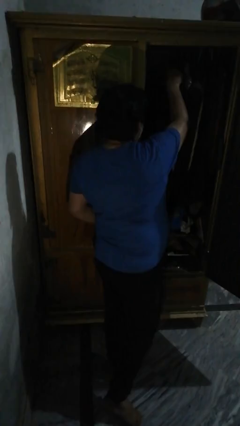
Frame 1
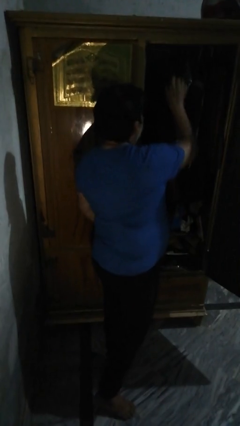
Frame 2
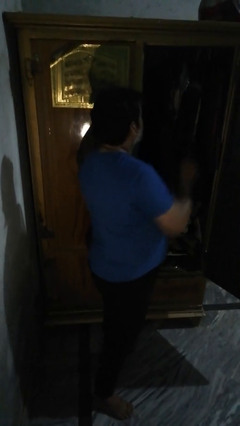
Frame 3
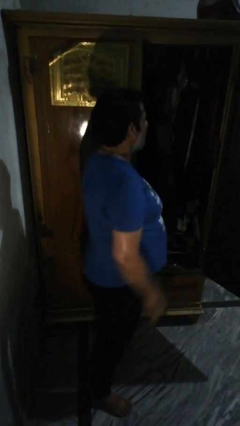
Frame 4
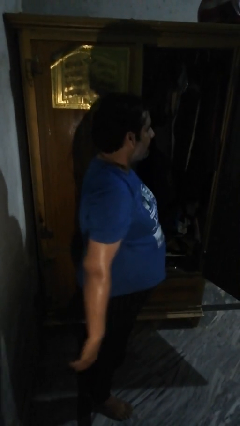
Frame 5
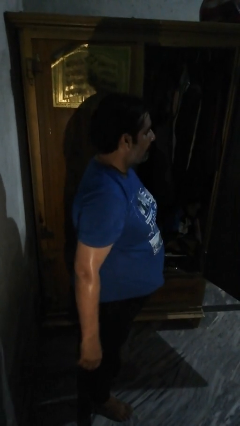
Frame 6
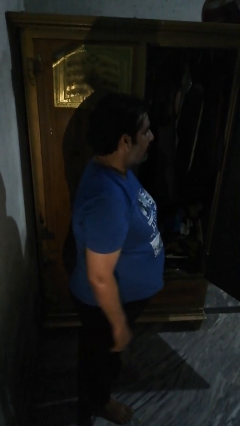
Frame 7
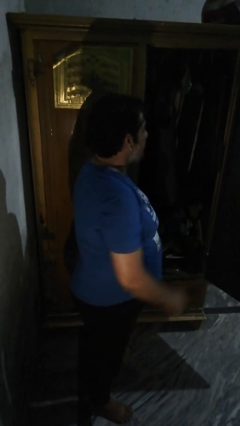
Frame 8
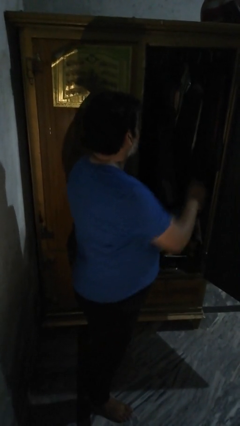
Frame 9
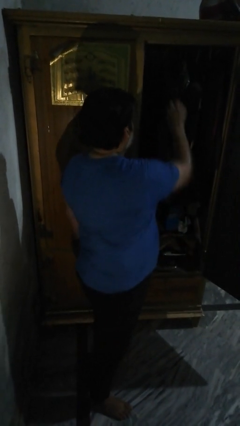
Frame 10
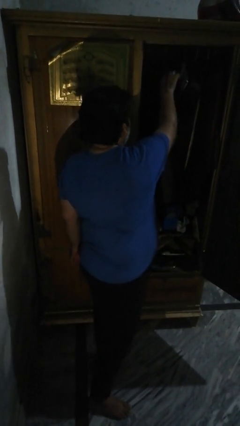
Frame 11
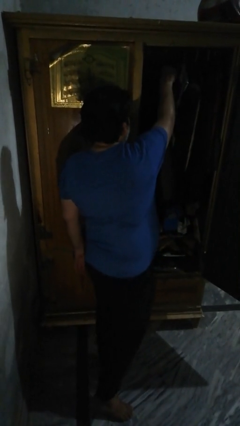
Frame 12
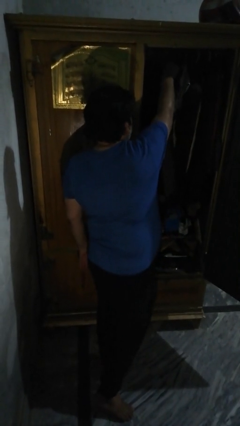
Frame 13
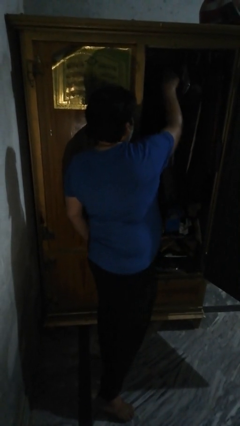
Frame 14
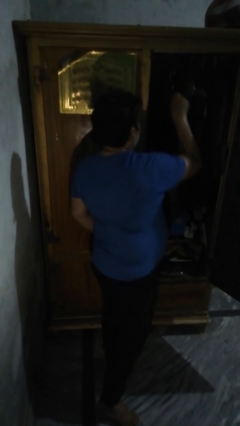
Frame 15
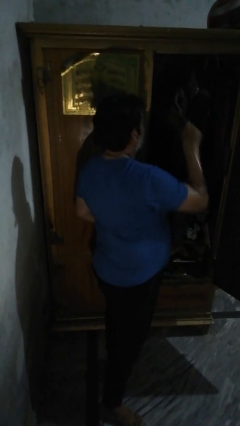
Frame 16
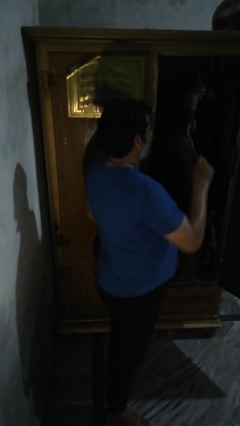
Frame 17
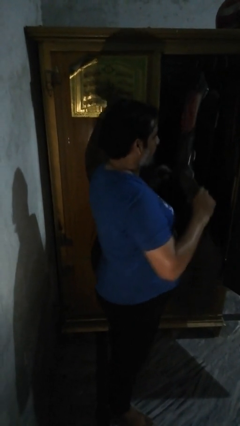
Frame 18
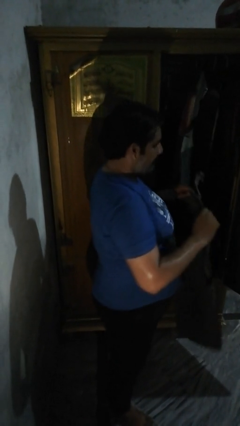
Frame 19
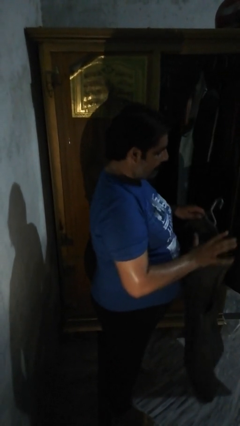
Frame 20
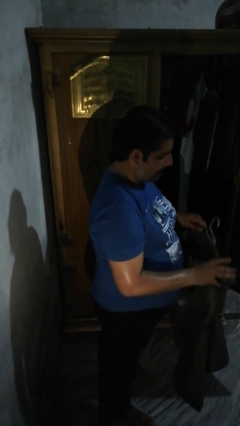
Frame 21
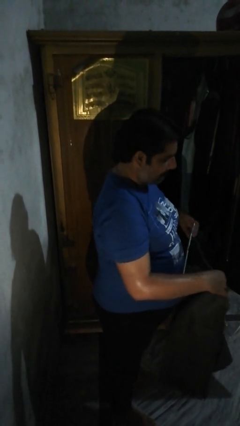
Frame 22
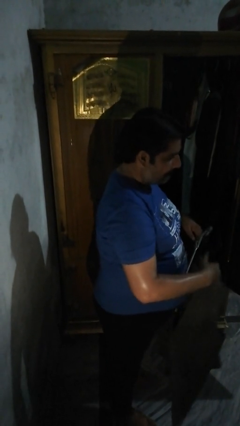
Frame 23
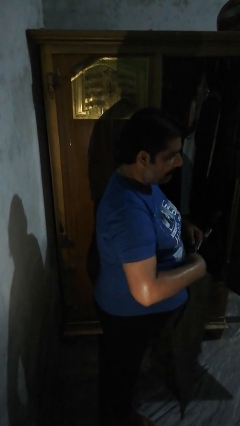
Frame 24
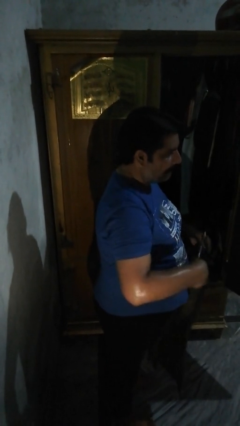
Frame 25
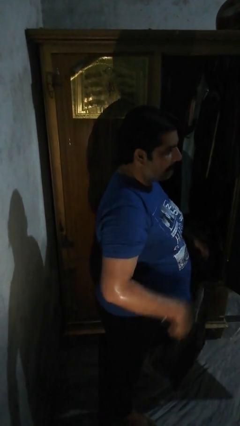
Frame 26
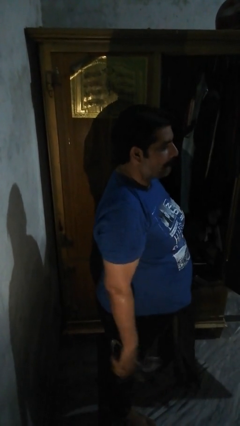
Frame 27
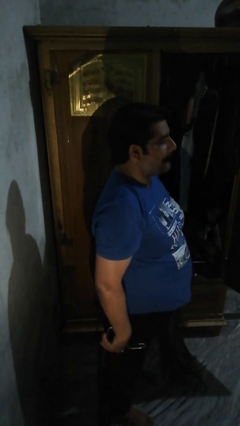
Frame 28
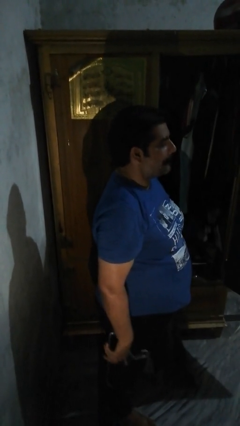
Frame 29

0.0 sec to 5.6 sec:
person takes clothes from closet

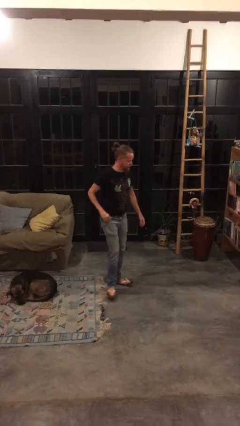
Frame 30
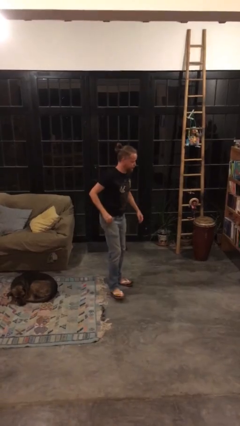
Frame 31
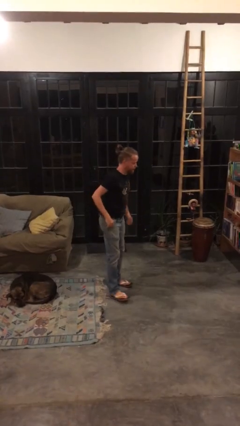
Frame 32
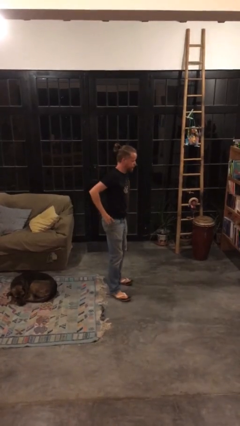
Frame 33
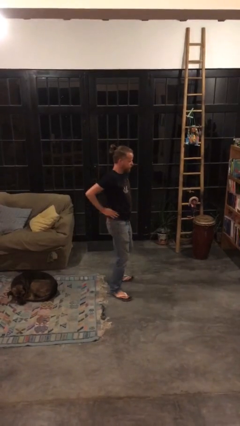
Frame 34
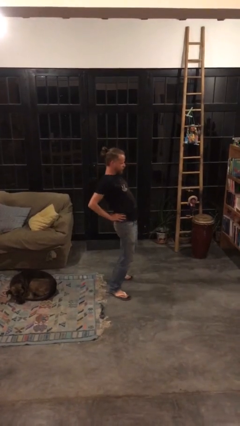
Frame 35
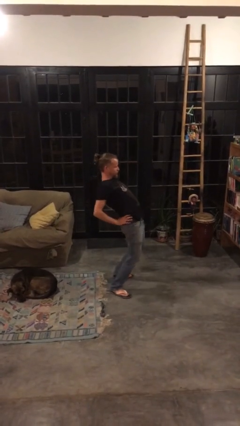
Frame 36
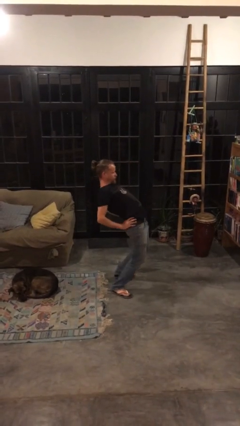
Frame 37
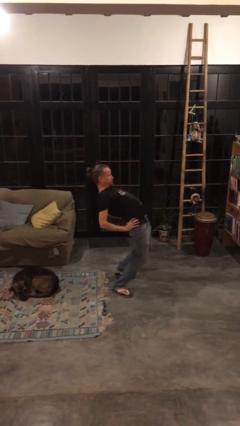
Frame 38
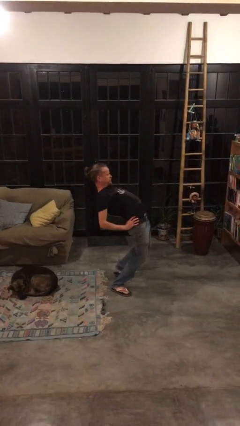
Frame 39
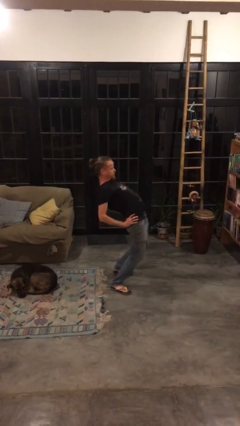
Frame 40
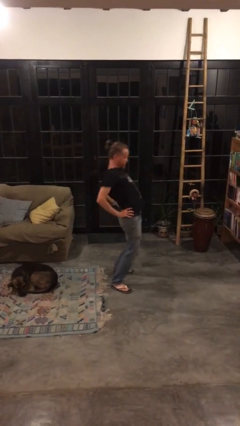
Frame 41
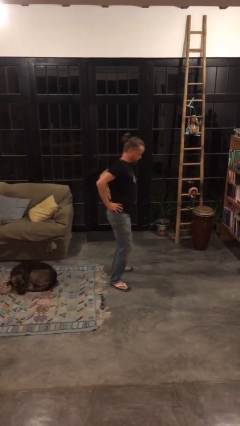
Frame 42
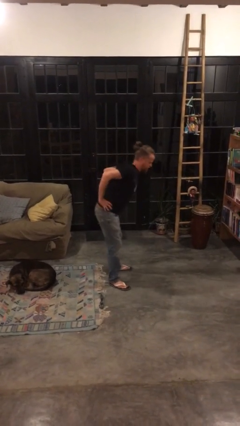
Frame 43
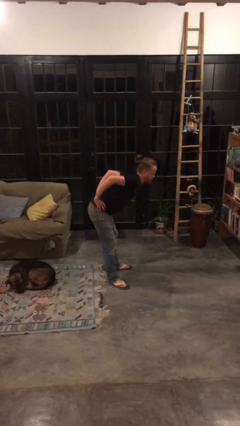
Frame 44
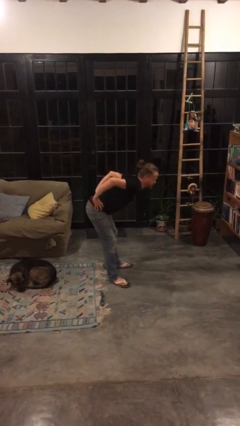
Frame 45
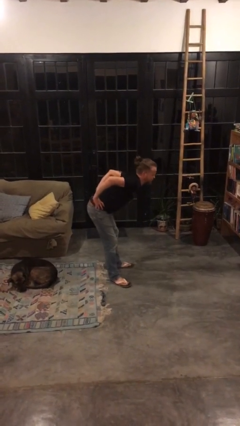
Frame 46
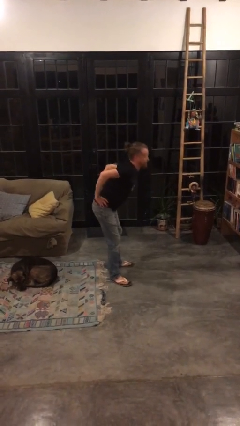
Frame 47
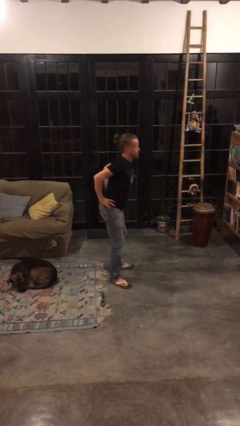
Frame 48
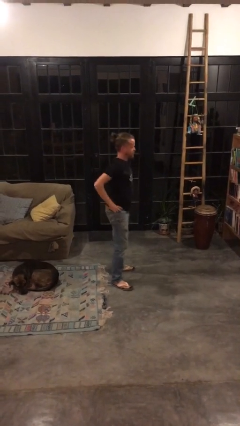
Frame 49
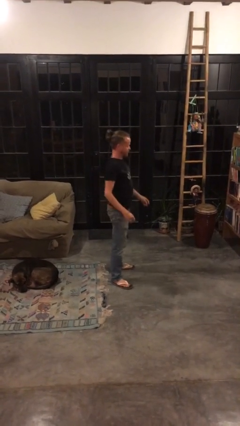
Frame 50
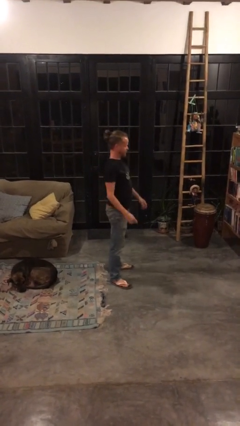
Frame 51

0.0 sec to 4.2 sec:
person stretches back

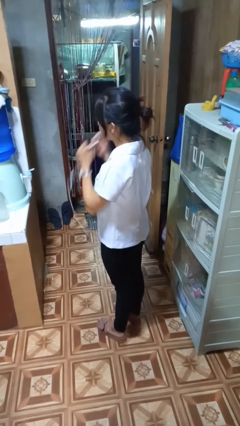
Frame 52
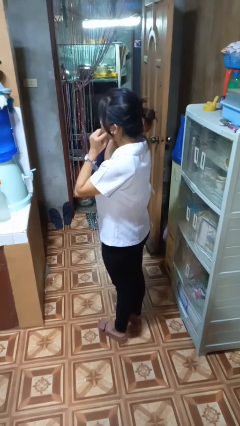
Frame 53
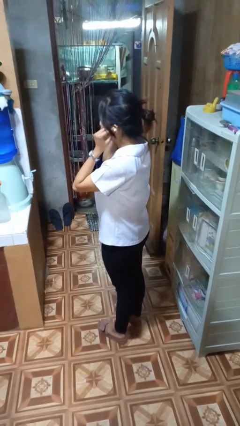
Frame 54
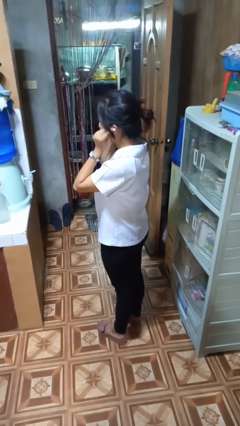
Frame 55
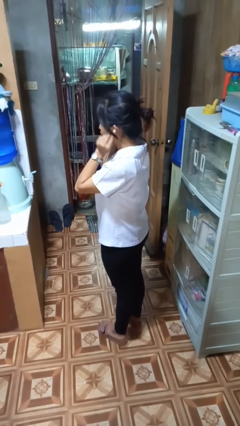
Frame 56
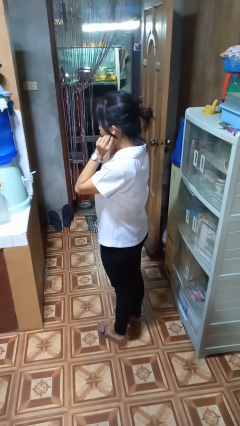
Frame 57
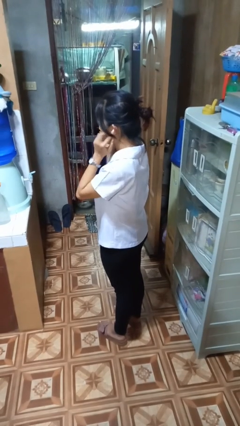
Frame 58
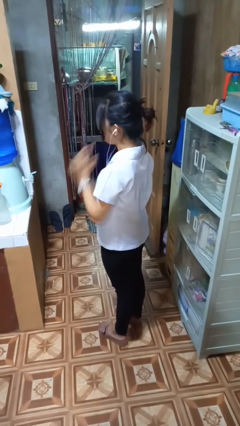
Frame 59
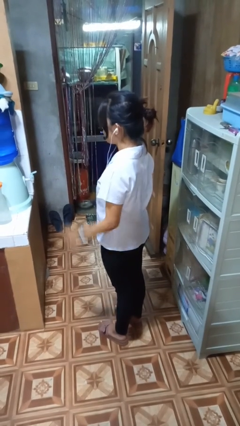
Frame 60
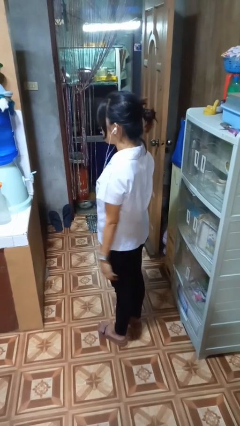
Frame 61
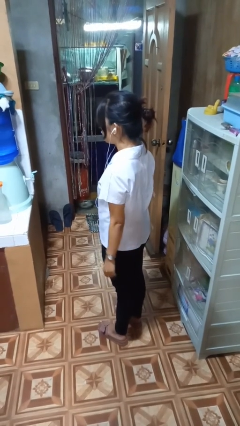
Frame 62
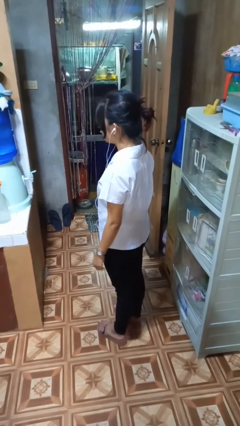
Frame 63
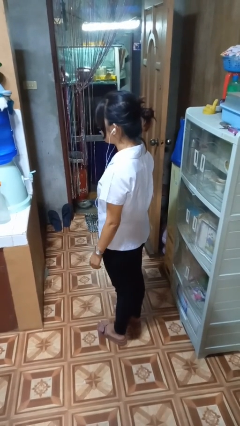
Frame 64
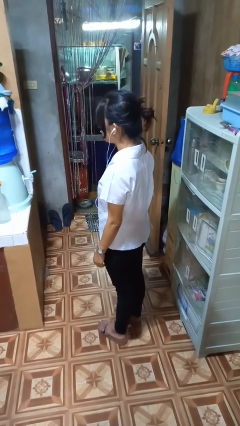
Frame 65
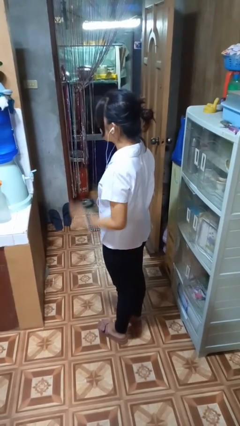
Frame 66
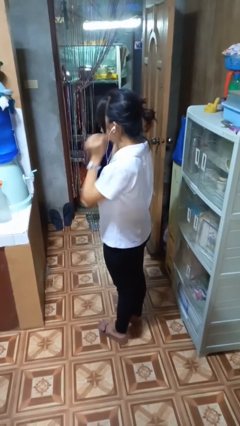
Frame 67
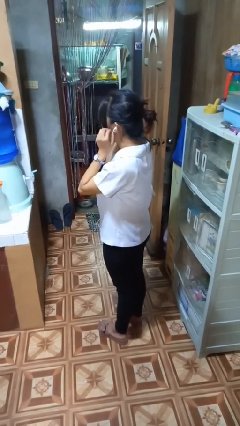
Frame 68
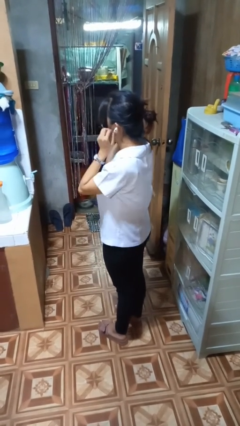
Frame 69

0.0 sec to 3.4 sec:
person puts on headphones

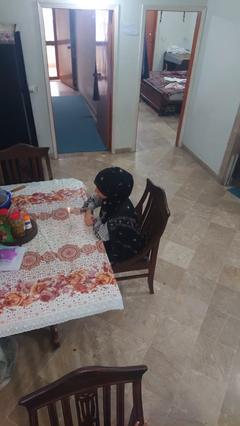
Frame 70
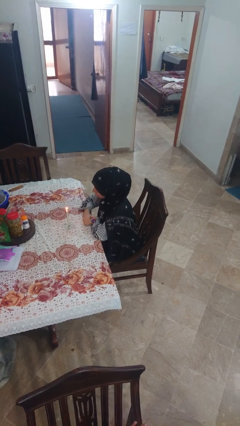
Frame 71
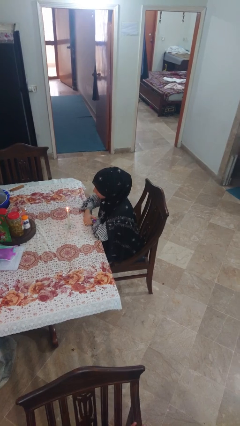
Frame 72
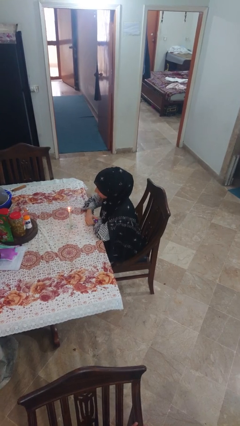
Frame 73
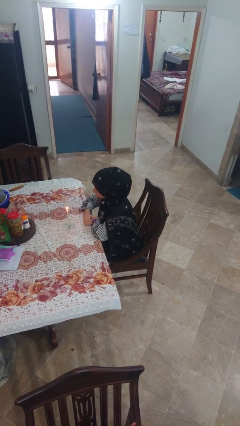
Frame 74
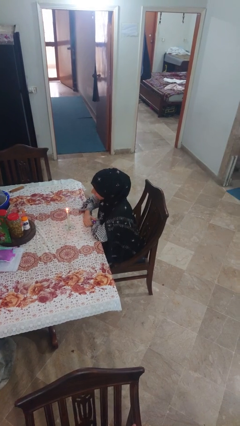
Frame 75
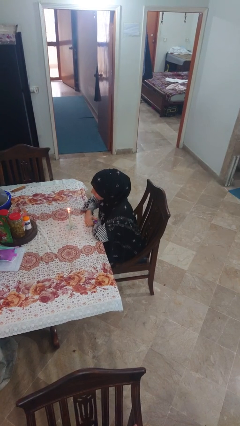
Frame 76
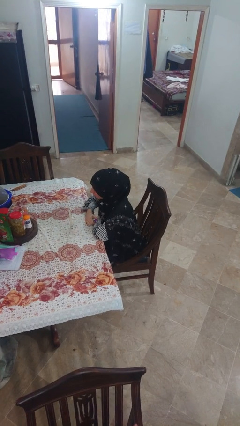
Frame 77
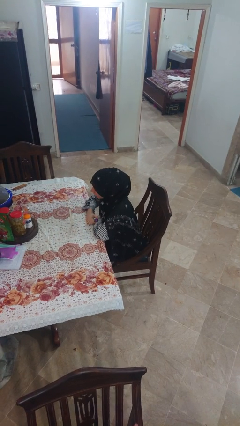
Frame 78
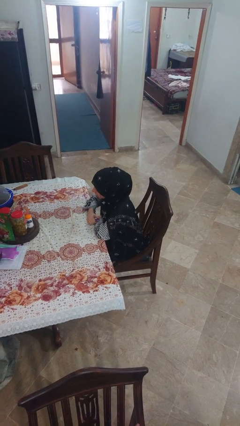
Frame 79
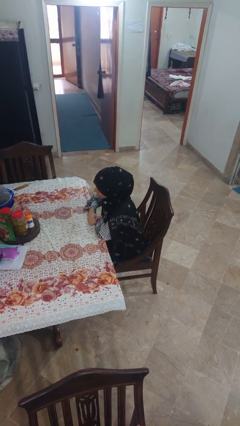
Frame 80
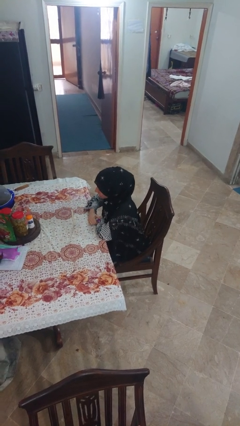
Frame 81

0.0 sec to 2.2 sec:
person extinguishes candle

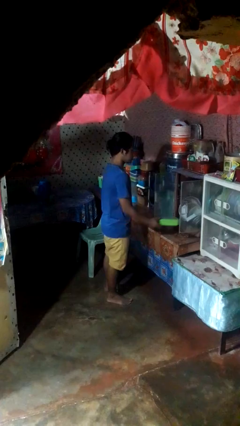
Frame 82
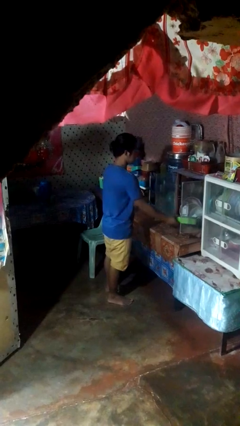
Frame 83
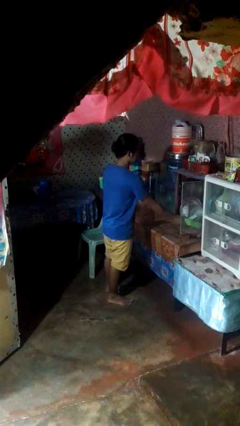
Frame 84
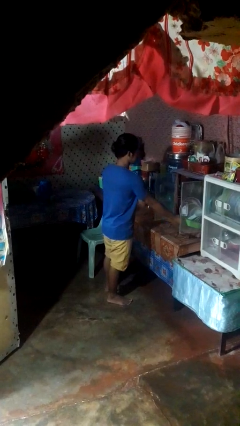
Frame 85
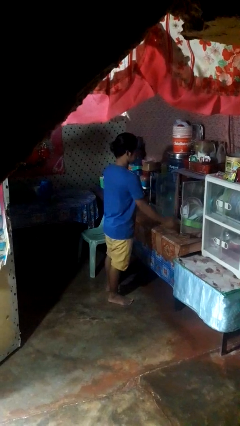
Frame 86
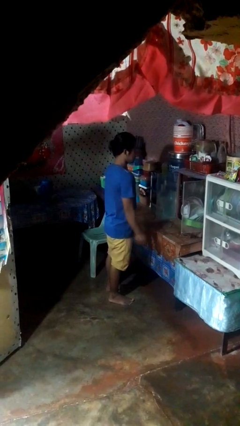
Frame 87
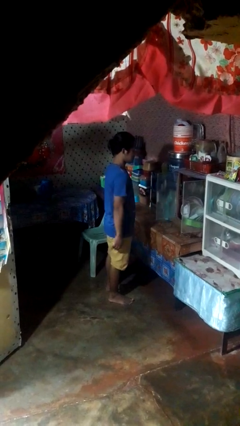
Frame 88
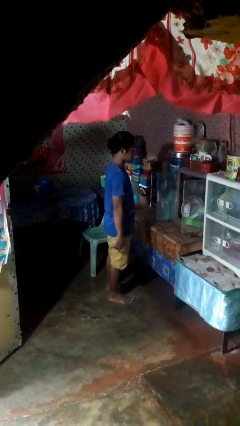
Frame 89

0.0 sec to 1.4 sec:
person puts down object into cabinet

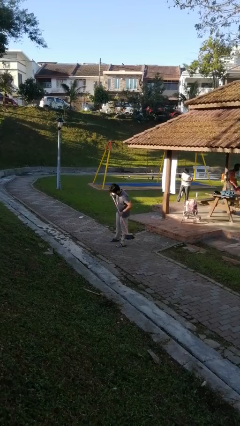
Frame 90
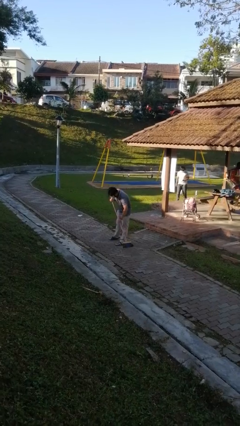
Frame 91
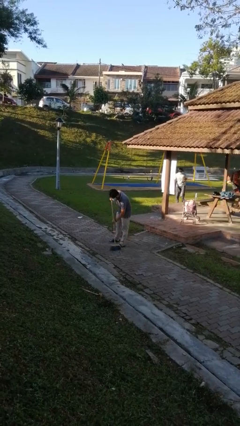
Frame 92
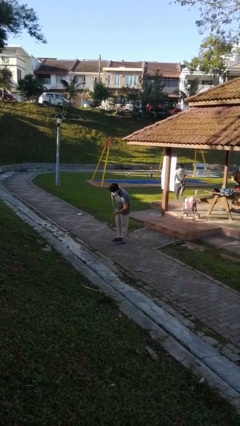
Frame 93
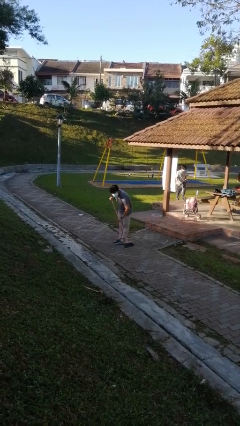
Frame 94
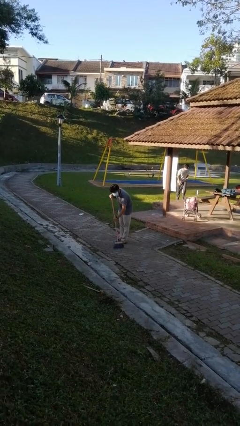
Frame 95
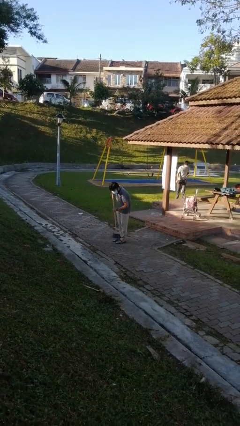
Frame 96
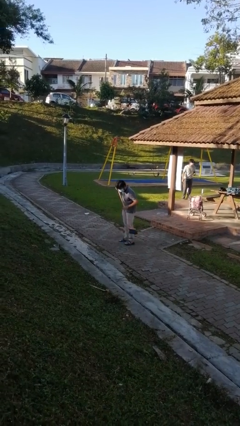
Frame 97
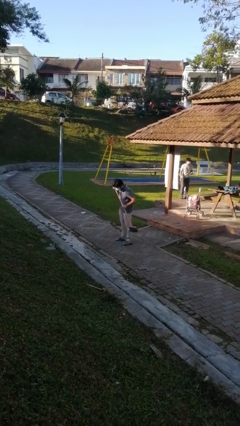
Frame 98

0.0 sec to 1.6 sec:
person sweeps floor
